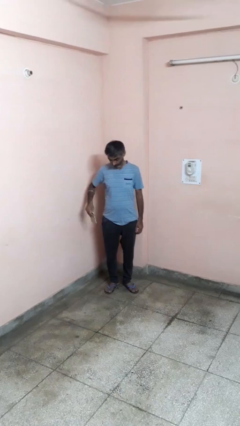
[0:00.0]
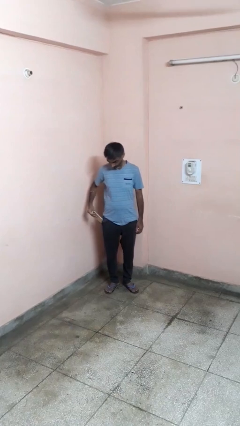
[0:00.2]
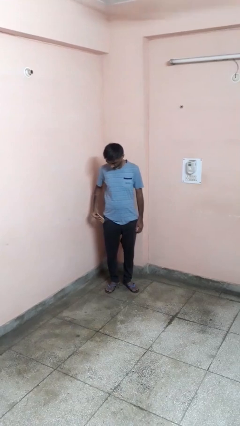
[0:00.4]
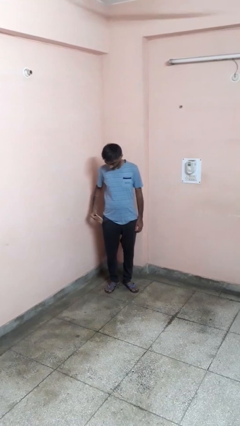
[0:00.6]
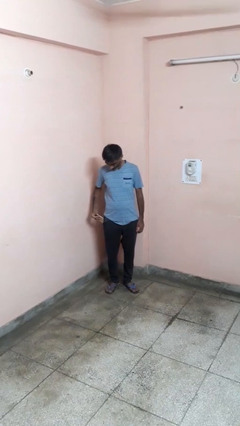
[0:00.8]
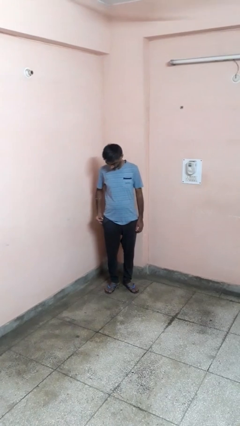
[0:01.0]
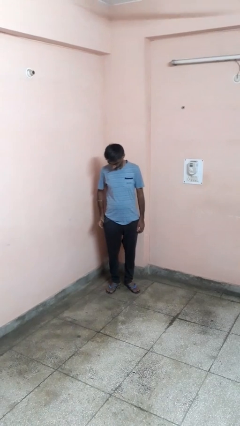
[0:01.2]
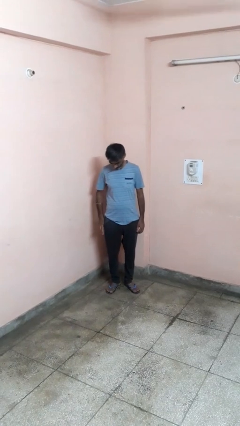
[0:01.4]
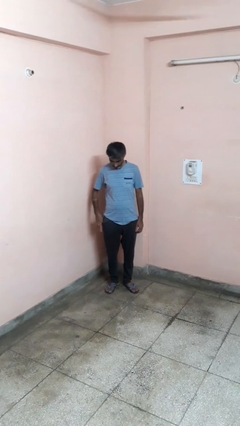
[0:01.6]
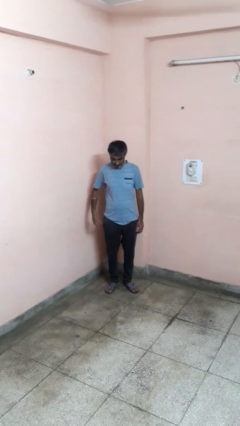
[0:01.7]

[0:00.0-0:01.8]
person puts phone into pocket

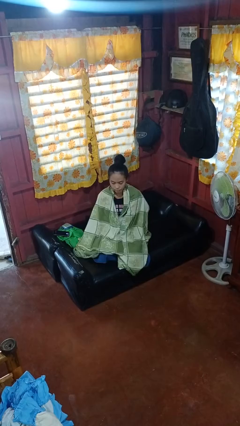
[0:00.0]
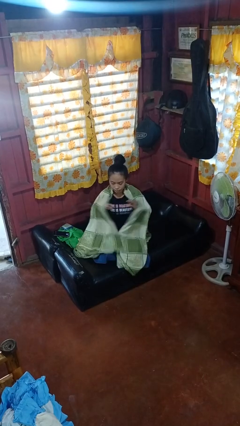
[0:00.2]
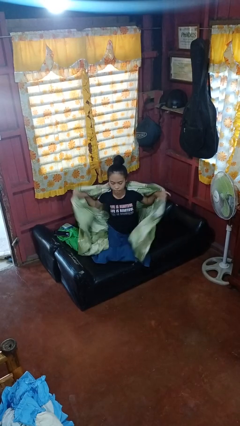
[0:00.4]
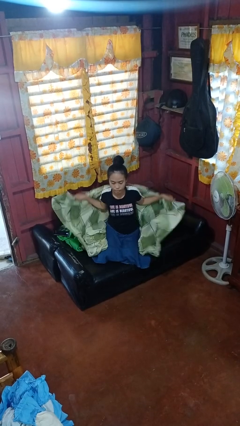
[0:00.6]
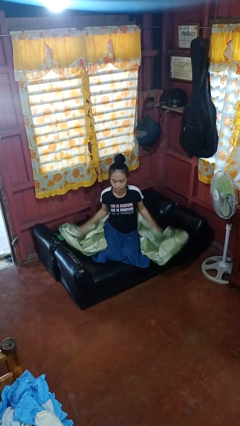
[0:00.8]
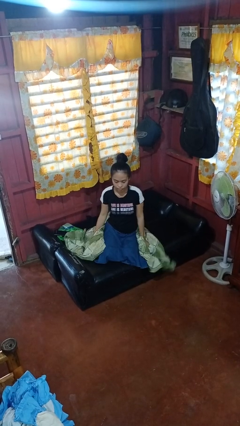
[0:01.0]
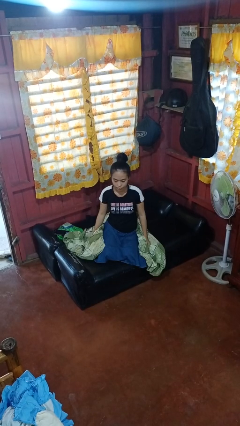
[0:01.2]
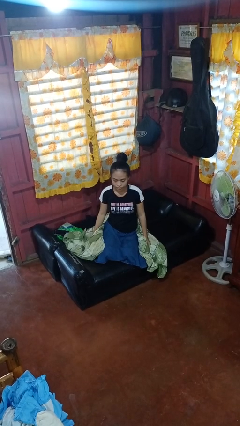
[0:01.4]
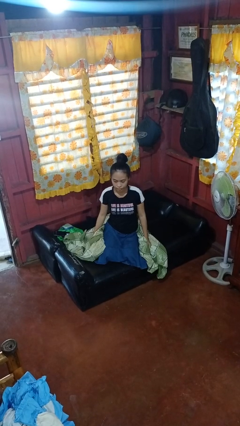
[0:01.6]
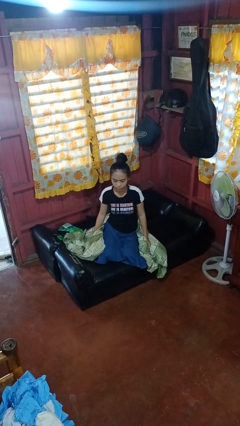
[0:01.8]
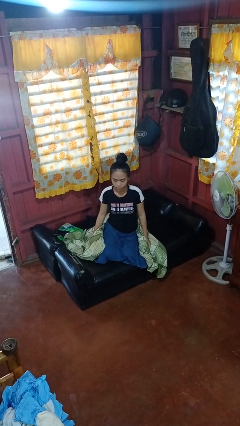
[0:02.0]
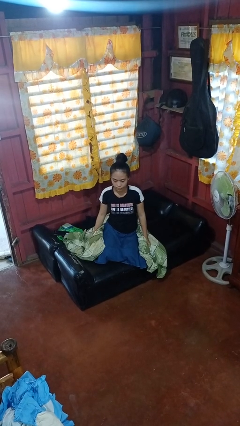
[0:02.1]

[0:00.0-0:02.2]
person uncovers with blanket

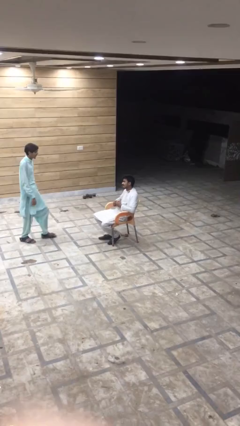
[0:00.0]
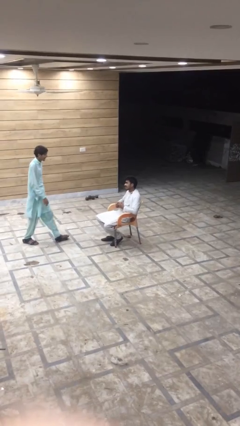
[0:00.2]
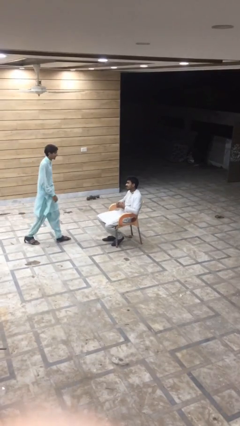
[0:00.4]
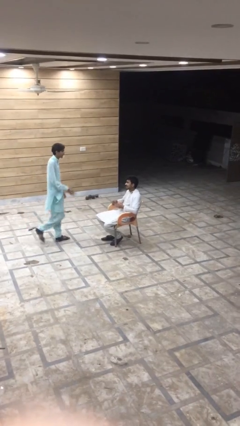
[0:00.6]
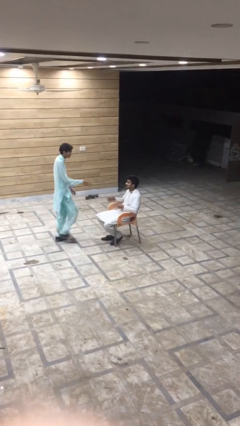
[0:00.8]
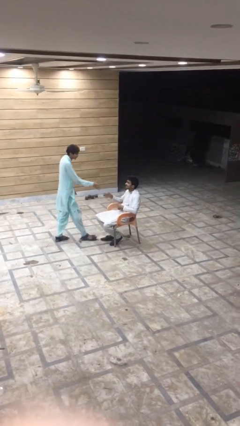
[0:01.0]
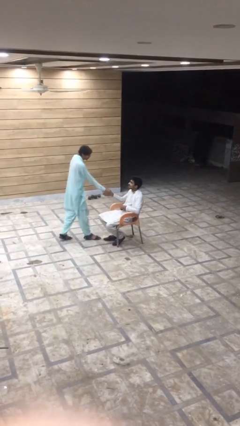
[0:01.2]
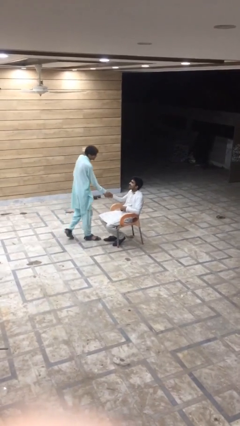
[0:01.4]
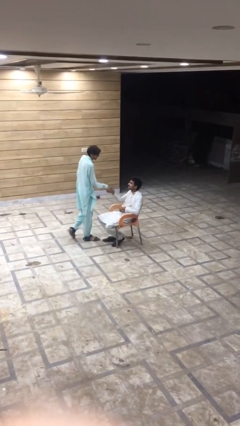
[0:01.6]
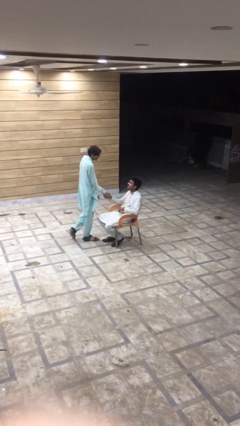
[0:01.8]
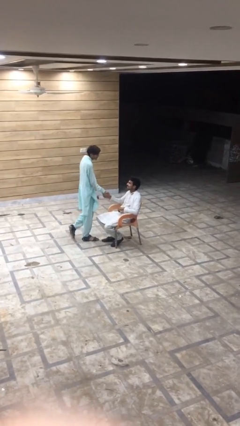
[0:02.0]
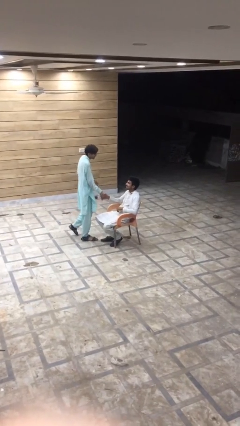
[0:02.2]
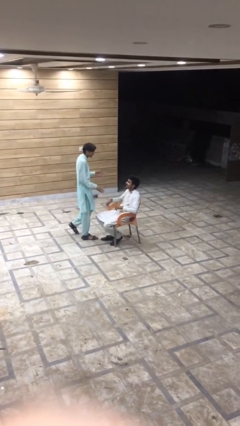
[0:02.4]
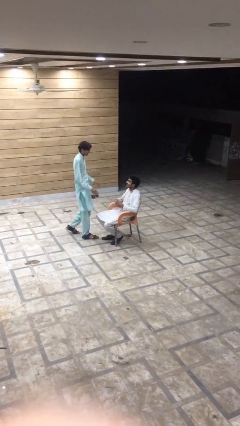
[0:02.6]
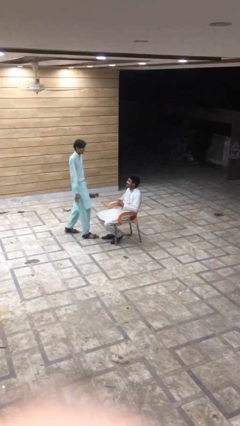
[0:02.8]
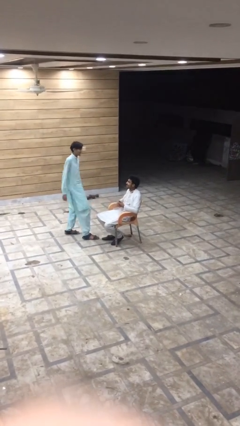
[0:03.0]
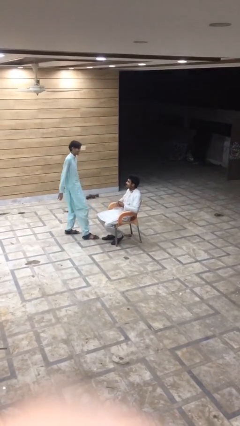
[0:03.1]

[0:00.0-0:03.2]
person shakes hand

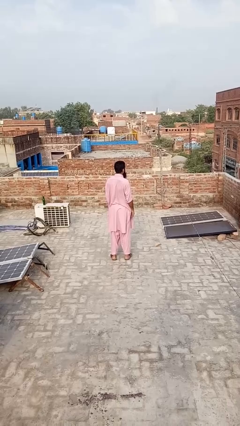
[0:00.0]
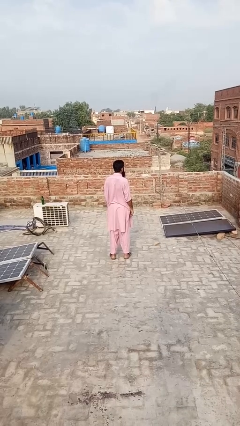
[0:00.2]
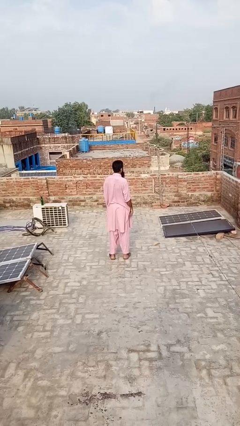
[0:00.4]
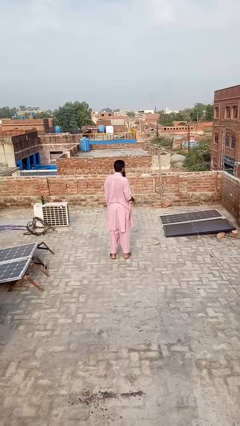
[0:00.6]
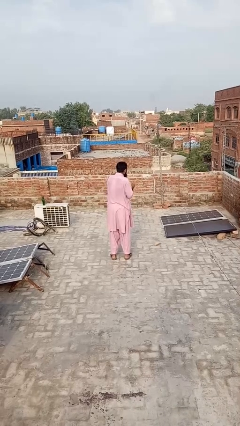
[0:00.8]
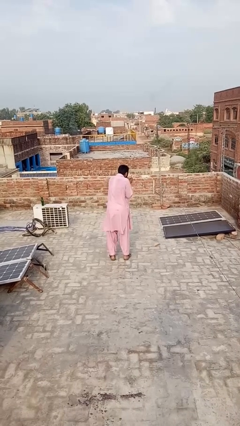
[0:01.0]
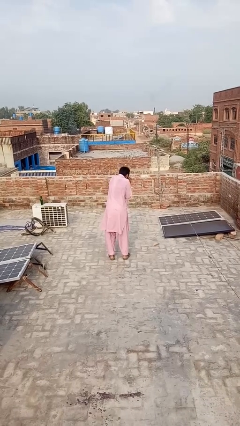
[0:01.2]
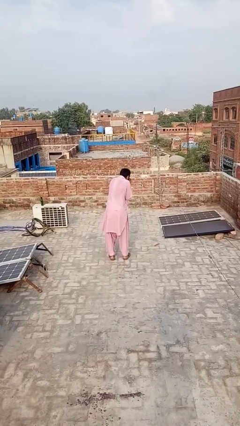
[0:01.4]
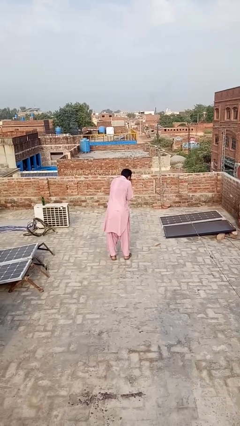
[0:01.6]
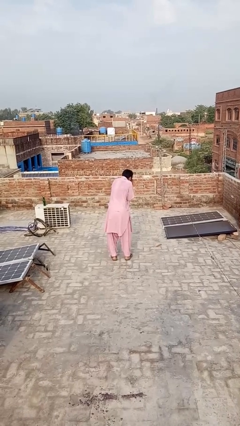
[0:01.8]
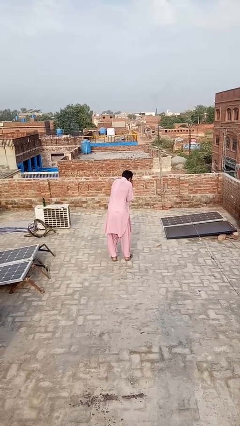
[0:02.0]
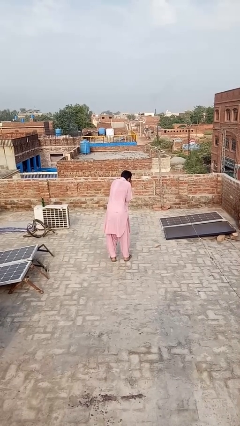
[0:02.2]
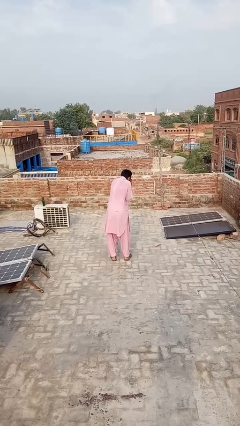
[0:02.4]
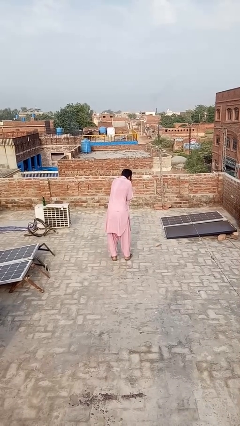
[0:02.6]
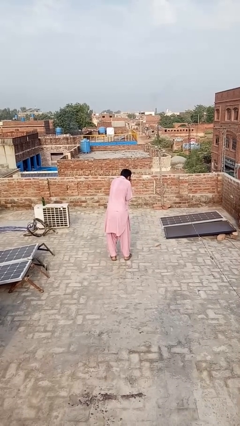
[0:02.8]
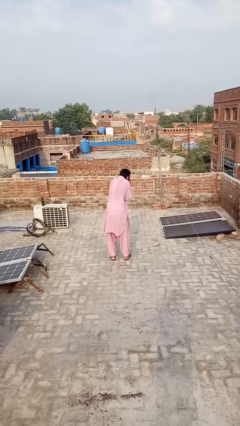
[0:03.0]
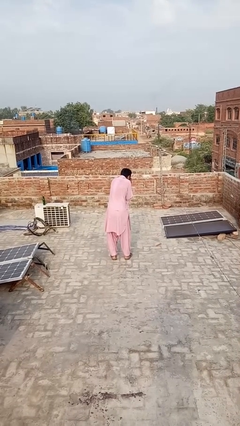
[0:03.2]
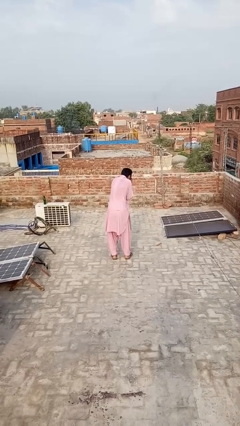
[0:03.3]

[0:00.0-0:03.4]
person blows into hands

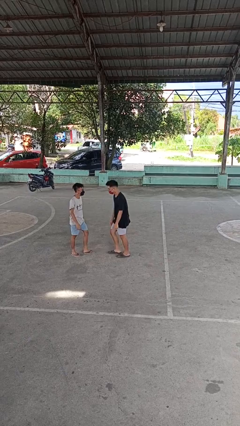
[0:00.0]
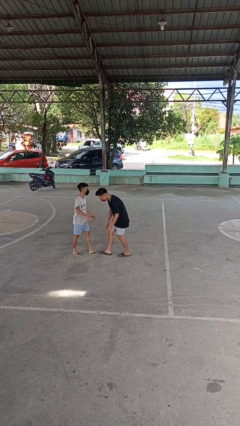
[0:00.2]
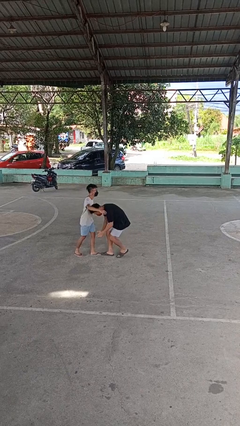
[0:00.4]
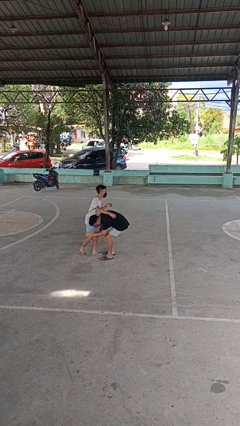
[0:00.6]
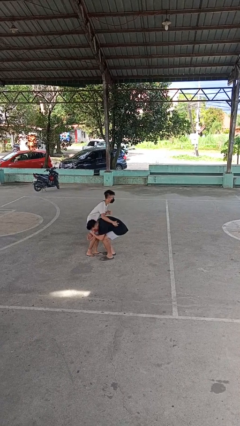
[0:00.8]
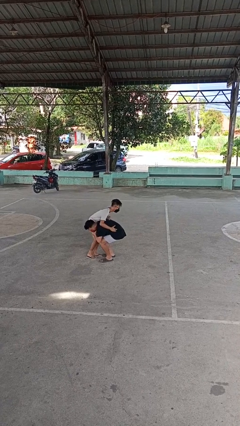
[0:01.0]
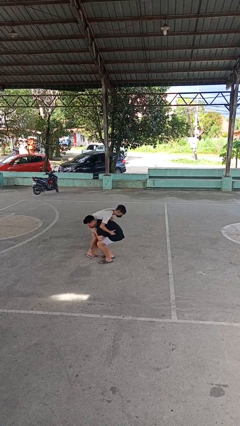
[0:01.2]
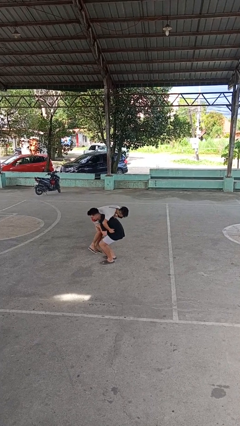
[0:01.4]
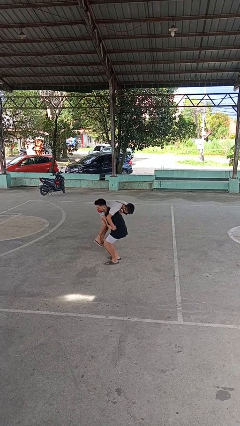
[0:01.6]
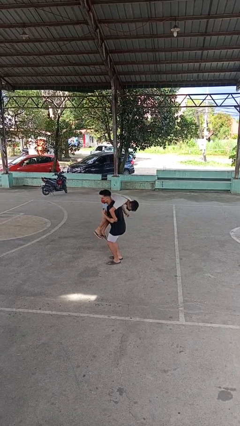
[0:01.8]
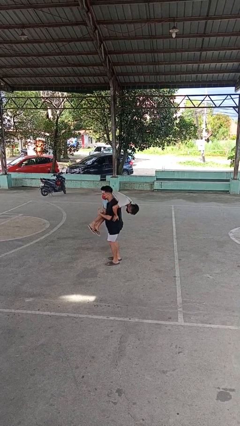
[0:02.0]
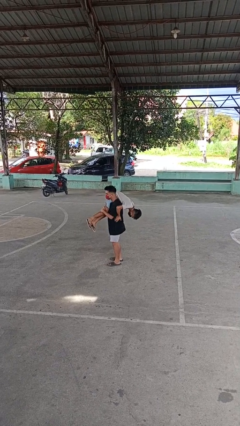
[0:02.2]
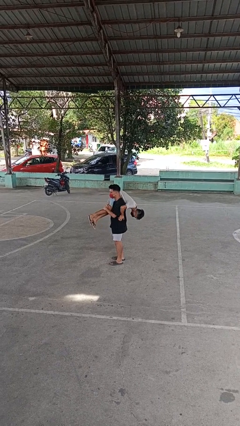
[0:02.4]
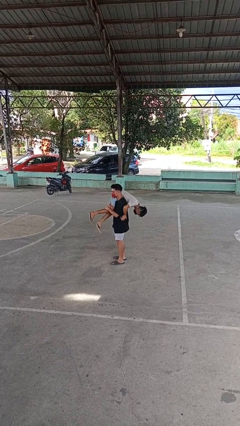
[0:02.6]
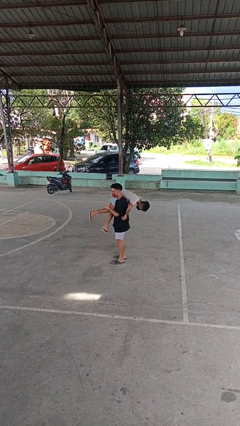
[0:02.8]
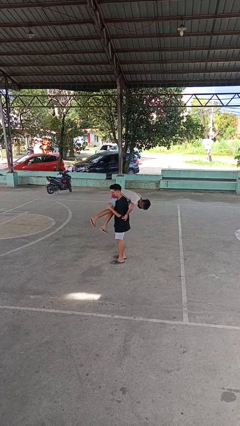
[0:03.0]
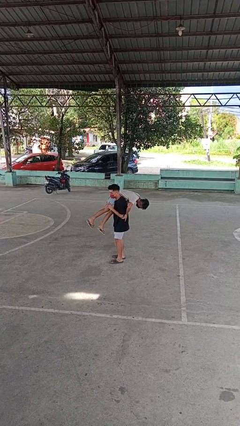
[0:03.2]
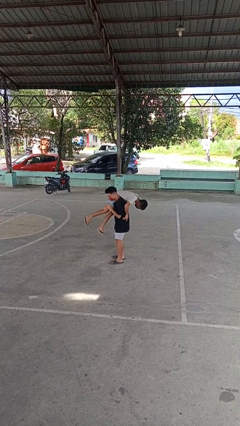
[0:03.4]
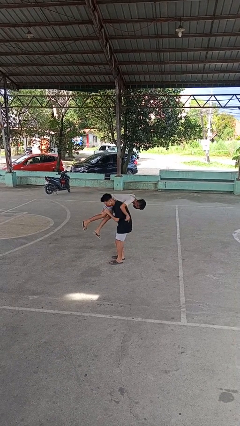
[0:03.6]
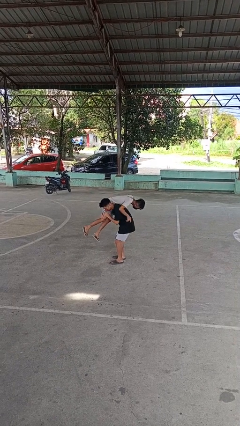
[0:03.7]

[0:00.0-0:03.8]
person carries person over shoulder

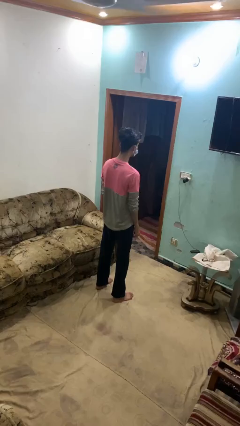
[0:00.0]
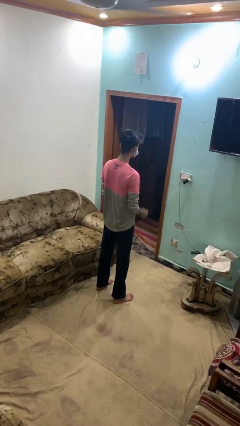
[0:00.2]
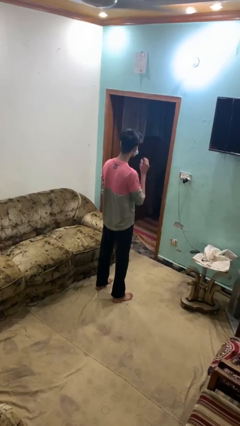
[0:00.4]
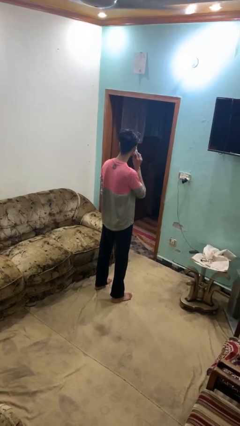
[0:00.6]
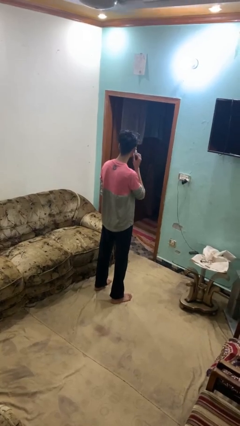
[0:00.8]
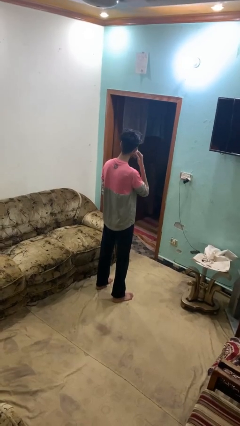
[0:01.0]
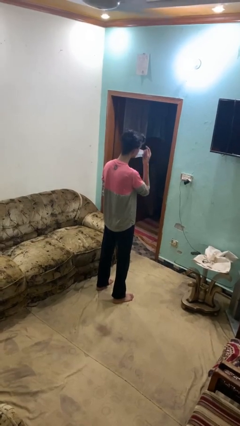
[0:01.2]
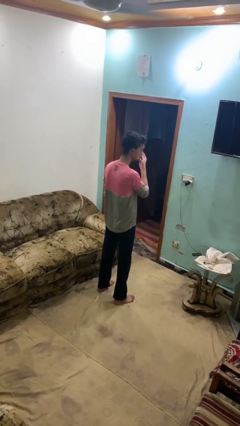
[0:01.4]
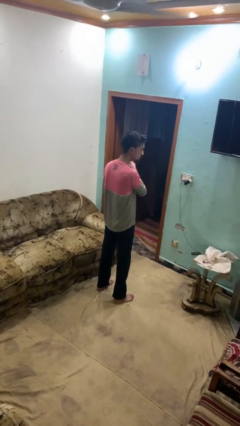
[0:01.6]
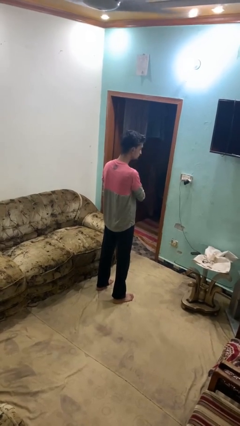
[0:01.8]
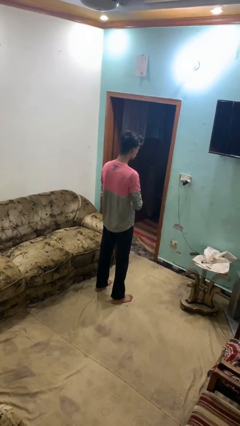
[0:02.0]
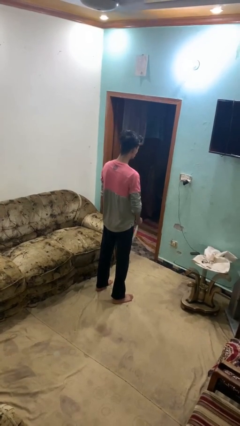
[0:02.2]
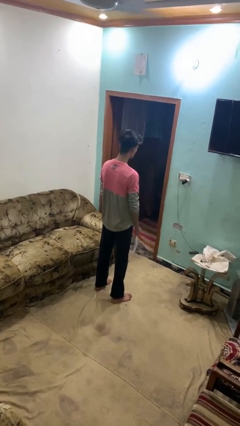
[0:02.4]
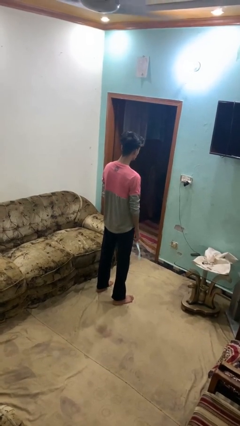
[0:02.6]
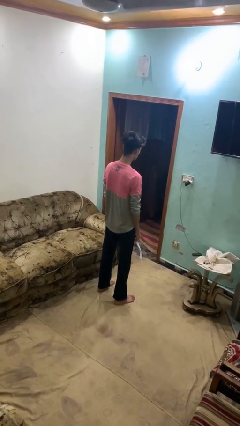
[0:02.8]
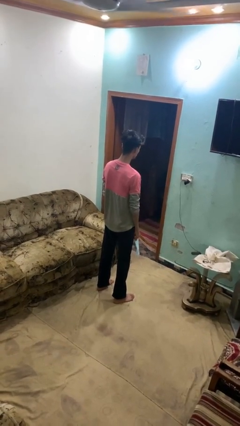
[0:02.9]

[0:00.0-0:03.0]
person takes off facemask
